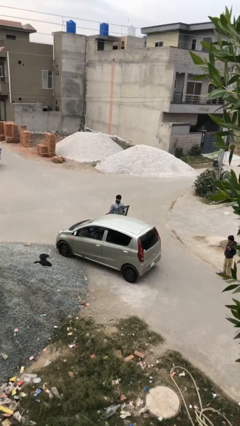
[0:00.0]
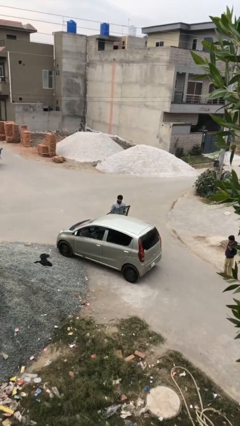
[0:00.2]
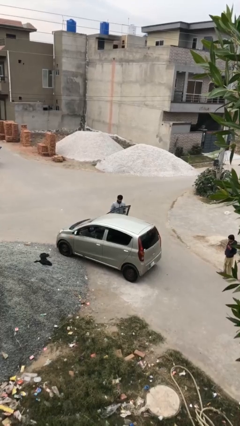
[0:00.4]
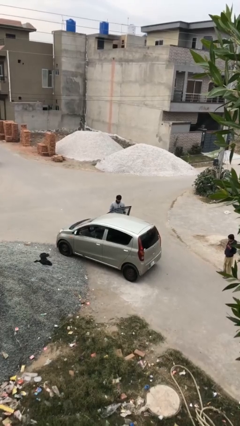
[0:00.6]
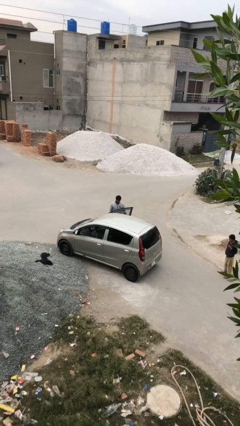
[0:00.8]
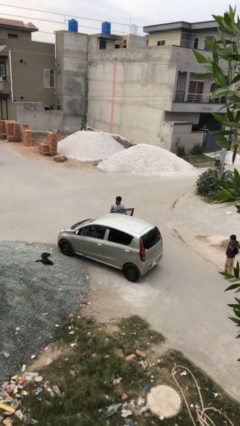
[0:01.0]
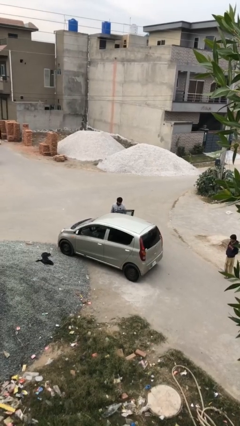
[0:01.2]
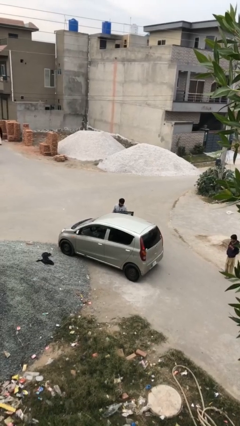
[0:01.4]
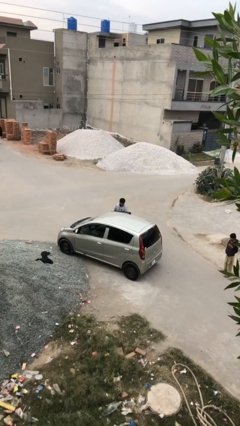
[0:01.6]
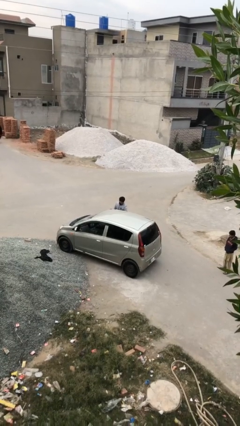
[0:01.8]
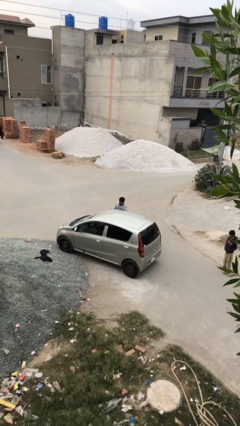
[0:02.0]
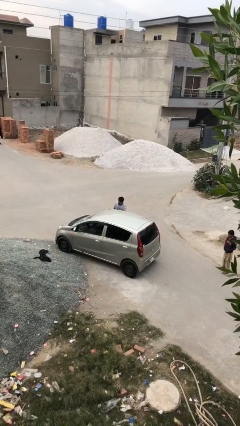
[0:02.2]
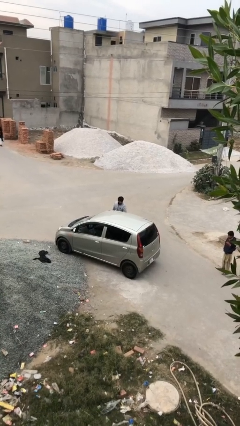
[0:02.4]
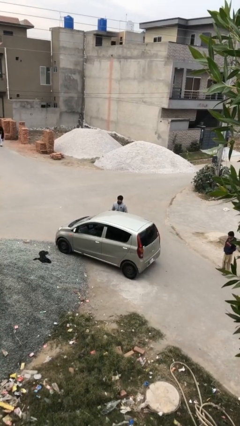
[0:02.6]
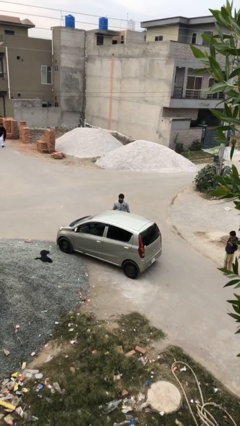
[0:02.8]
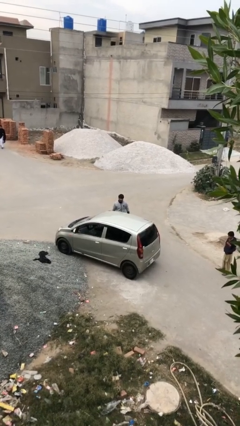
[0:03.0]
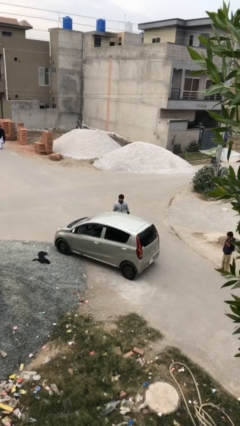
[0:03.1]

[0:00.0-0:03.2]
person closes car door

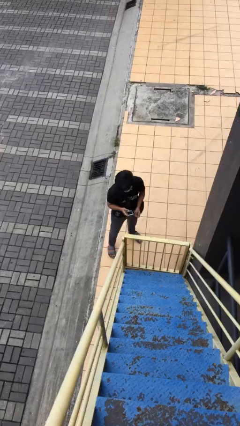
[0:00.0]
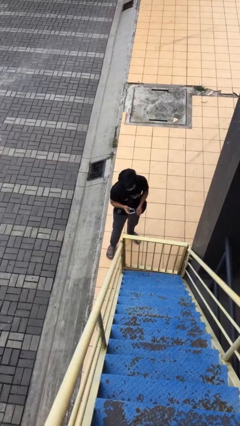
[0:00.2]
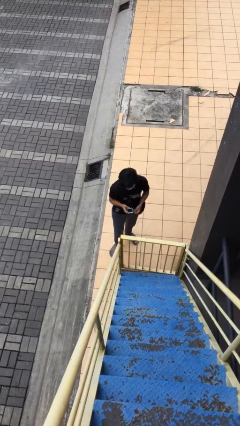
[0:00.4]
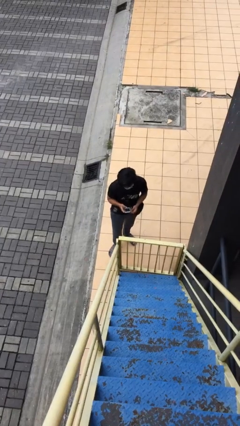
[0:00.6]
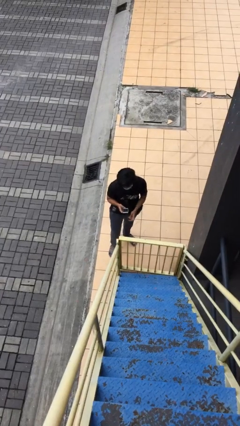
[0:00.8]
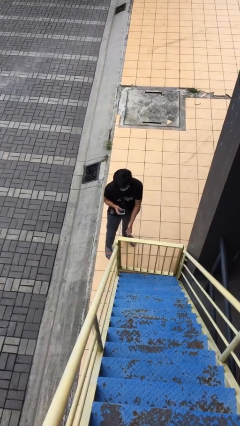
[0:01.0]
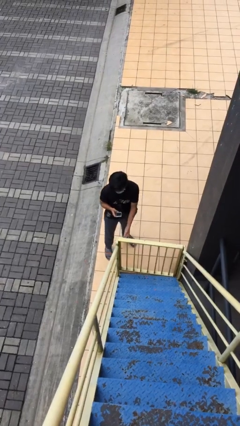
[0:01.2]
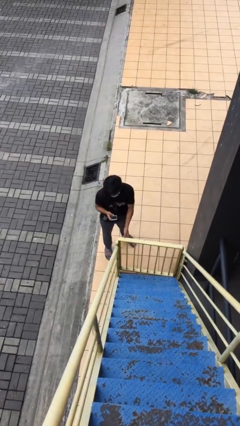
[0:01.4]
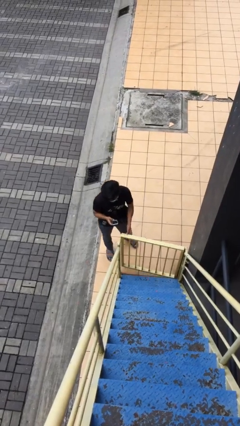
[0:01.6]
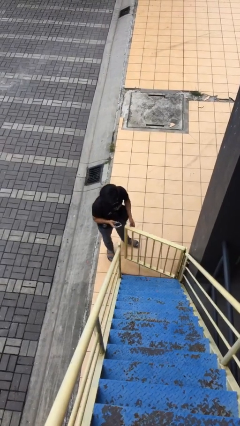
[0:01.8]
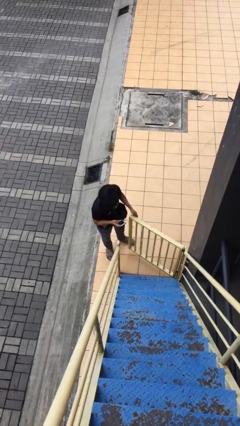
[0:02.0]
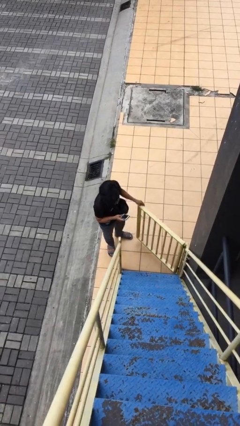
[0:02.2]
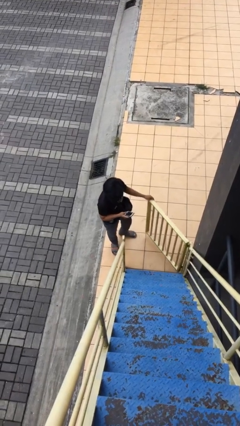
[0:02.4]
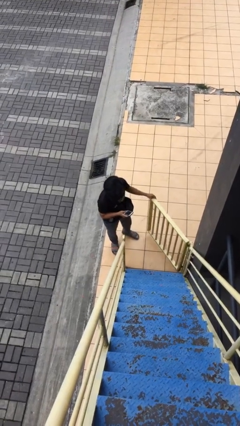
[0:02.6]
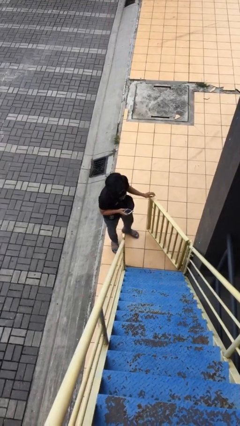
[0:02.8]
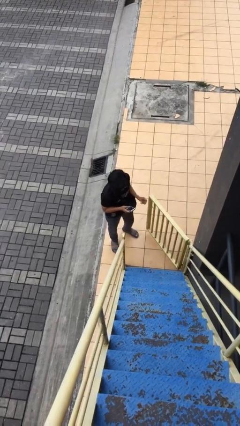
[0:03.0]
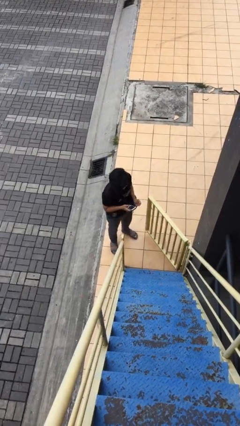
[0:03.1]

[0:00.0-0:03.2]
person opens facility door

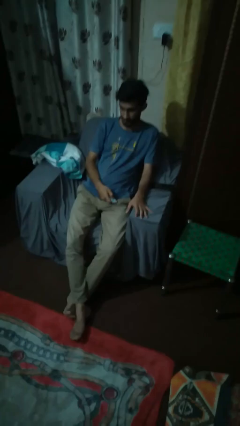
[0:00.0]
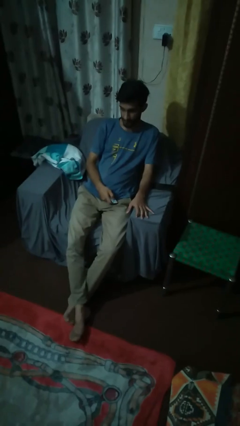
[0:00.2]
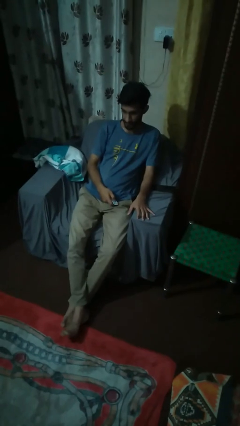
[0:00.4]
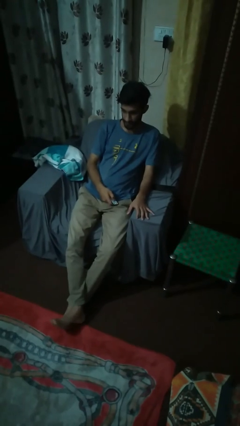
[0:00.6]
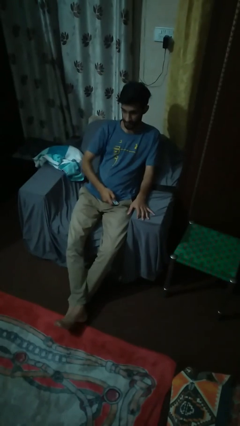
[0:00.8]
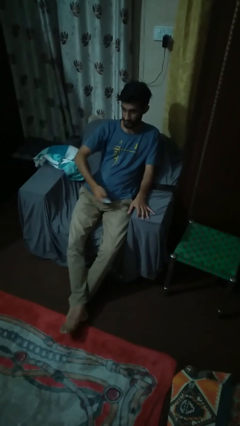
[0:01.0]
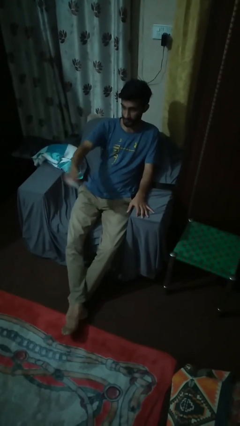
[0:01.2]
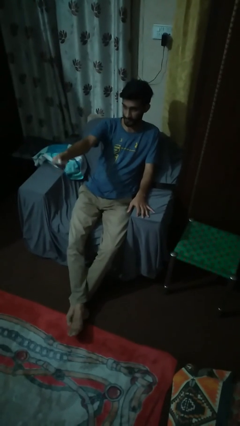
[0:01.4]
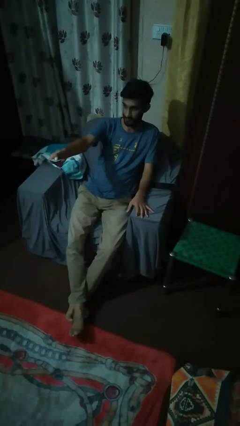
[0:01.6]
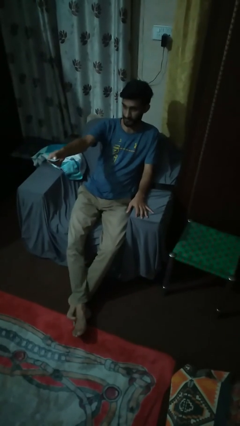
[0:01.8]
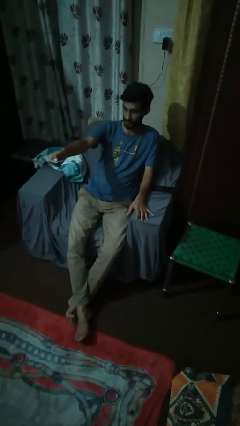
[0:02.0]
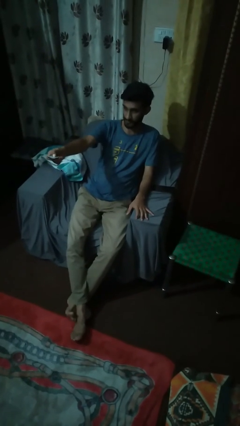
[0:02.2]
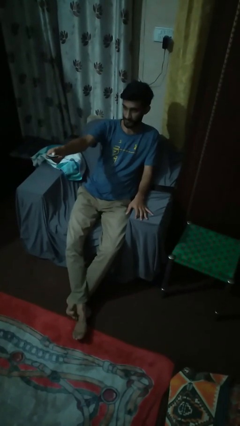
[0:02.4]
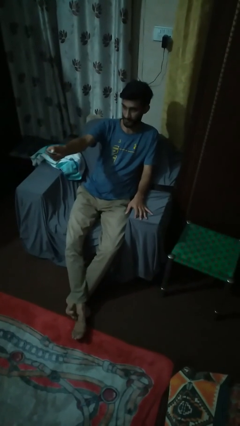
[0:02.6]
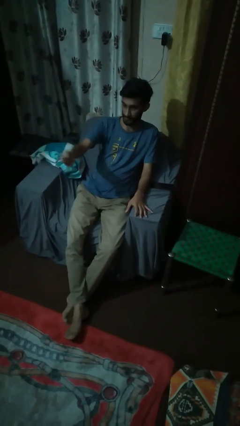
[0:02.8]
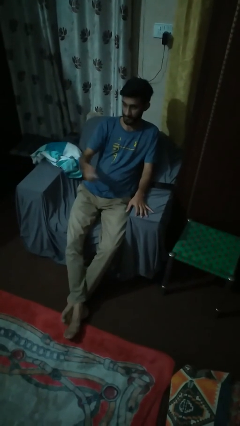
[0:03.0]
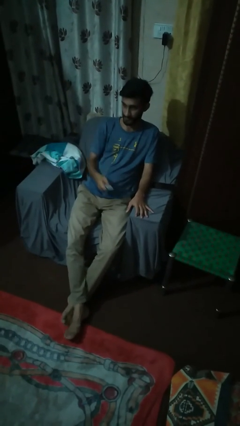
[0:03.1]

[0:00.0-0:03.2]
person uses television remote

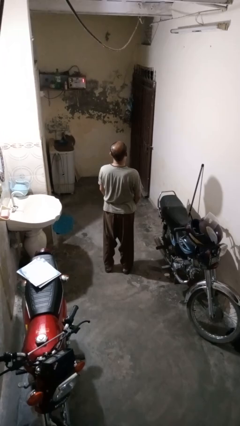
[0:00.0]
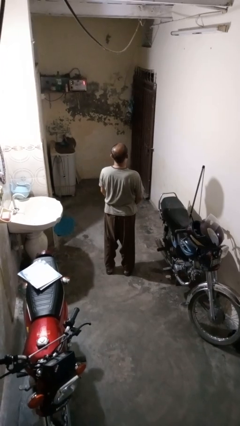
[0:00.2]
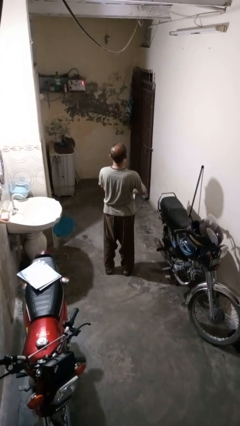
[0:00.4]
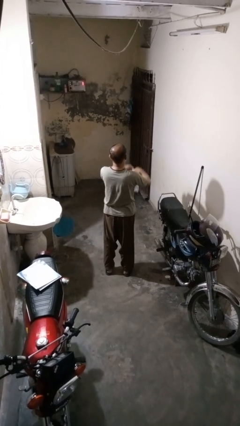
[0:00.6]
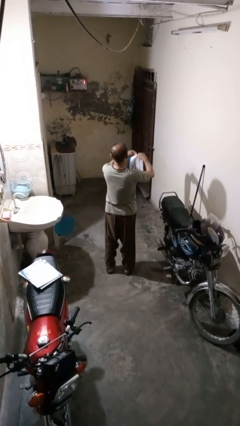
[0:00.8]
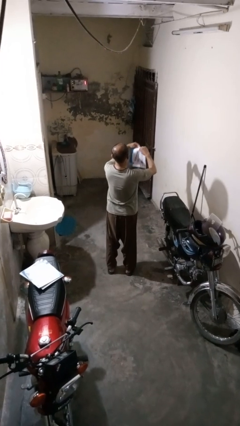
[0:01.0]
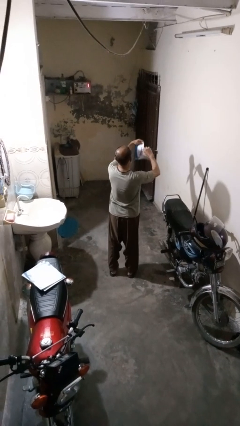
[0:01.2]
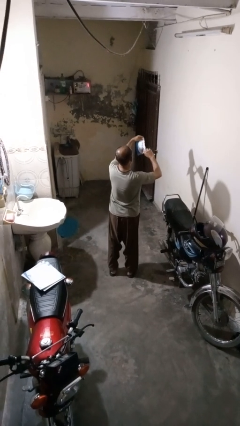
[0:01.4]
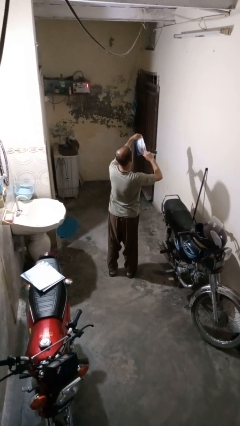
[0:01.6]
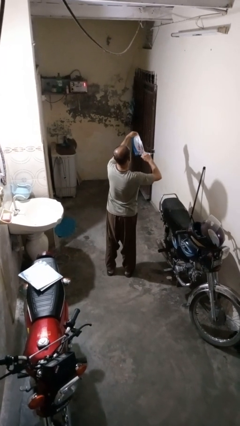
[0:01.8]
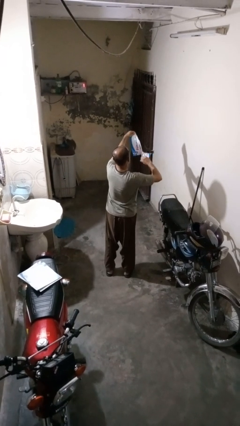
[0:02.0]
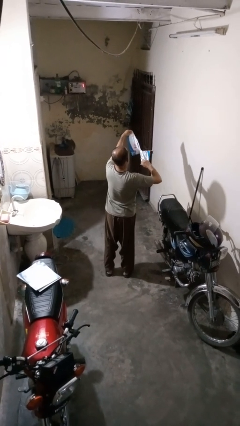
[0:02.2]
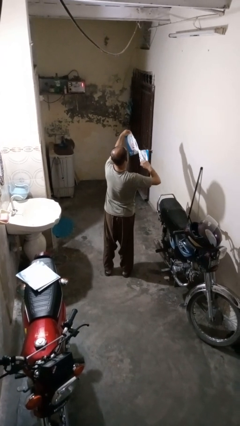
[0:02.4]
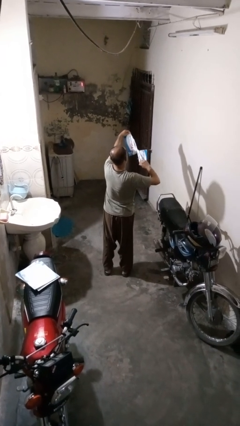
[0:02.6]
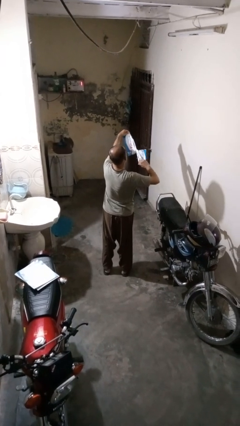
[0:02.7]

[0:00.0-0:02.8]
person tears paper

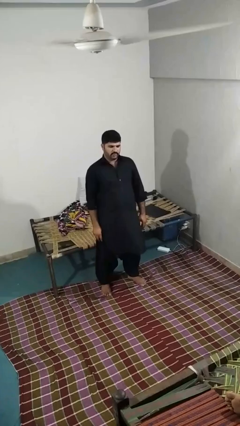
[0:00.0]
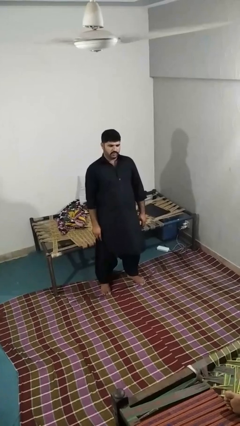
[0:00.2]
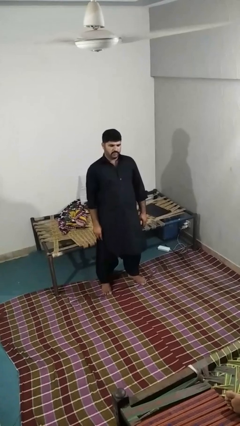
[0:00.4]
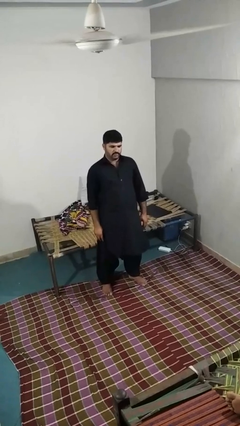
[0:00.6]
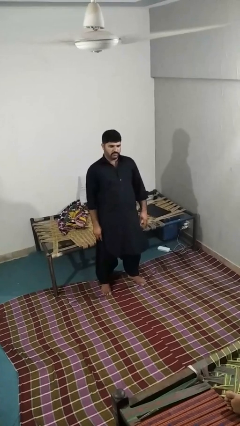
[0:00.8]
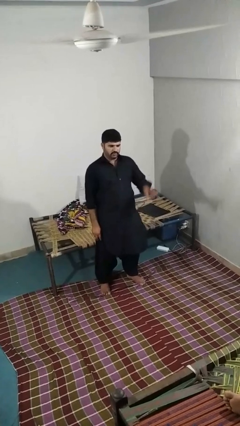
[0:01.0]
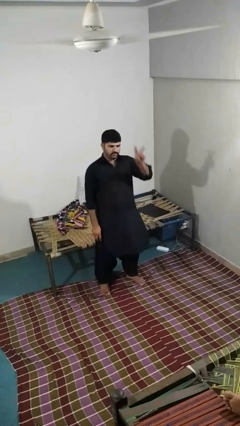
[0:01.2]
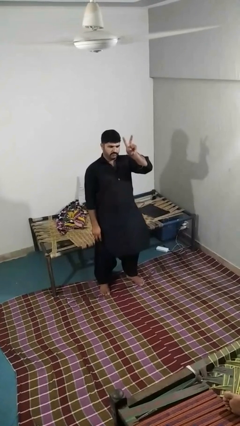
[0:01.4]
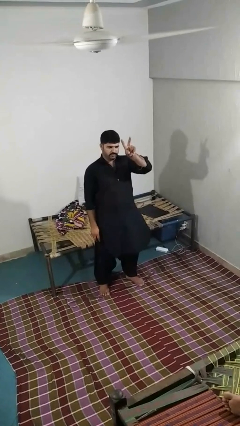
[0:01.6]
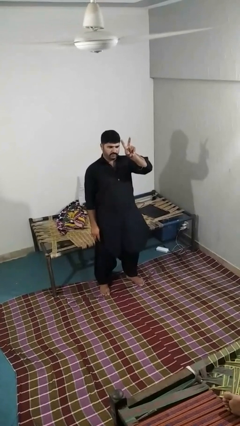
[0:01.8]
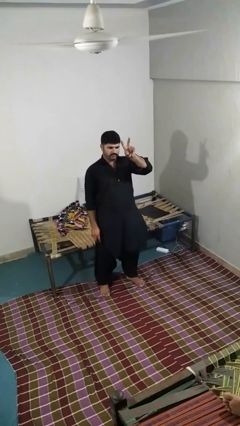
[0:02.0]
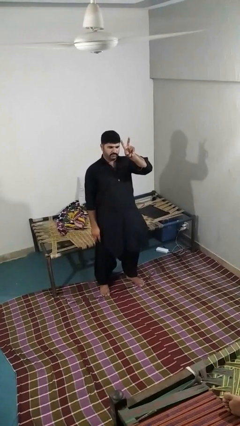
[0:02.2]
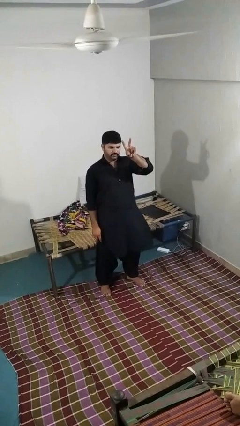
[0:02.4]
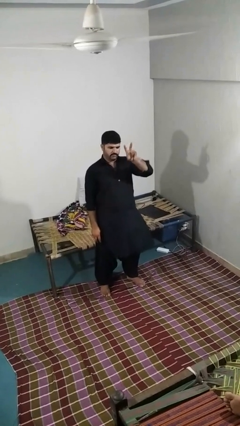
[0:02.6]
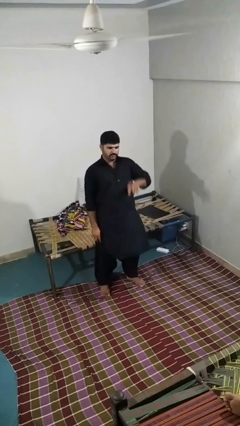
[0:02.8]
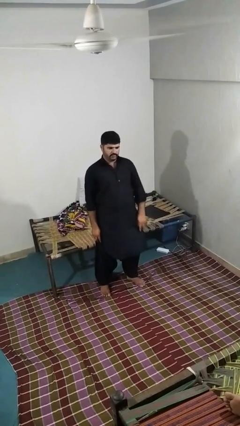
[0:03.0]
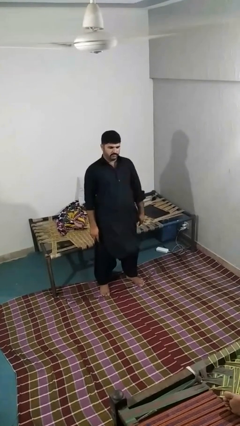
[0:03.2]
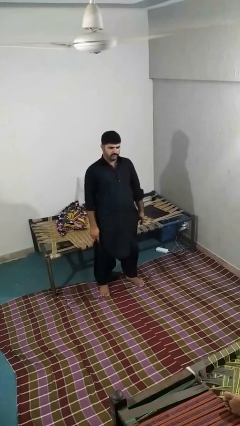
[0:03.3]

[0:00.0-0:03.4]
person gestures peace

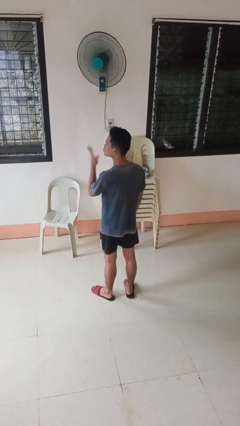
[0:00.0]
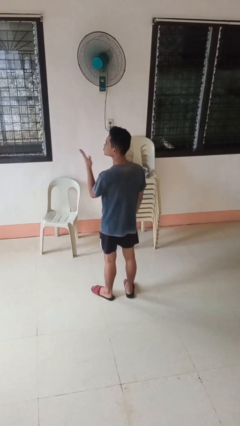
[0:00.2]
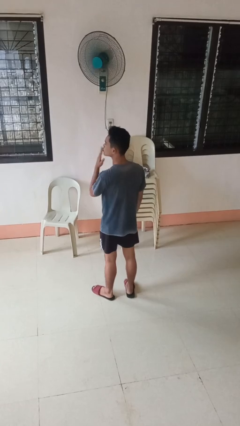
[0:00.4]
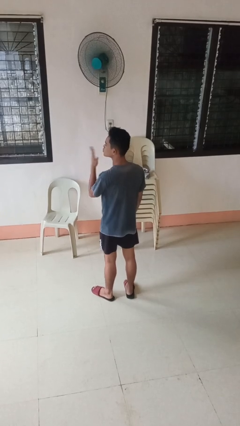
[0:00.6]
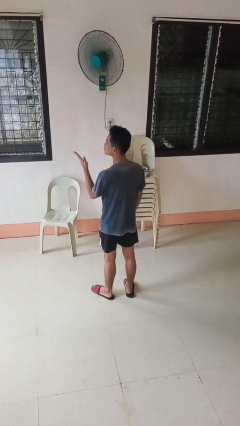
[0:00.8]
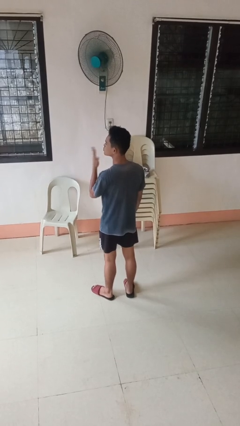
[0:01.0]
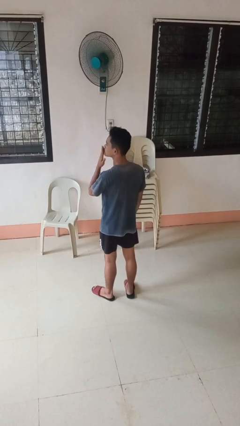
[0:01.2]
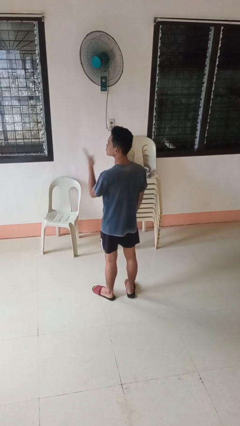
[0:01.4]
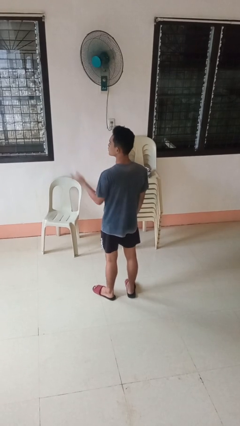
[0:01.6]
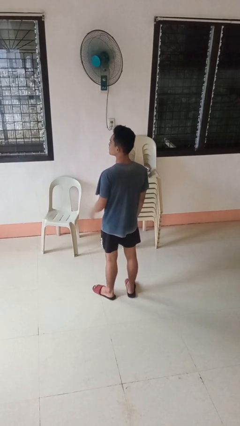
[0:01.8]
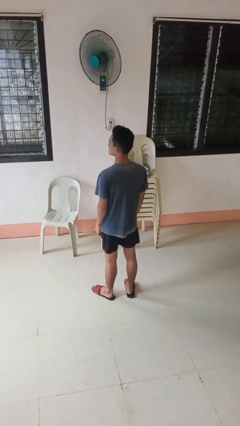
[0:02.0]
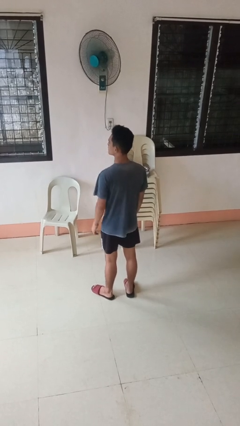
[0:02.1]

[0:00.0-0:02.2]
person gestures blow kiss
